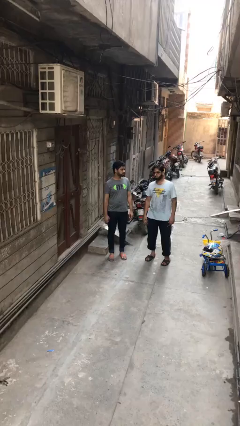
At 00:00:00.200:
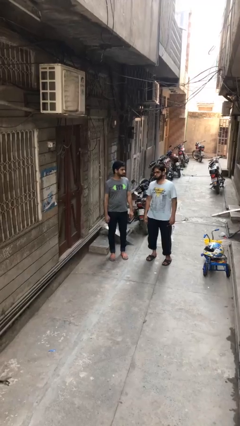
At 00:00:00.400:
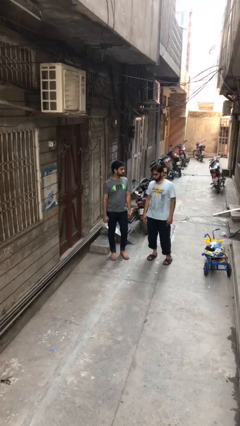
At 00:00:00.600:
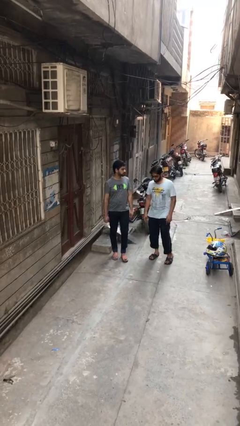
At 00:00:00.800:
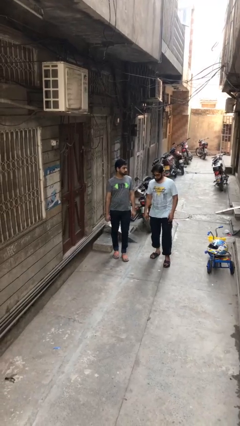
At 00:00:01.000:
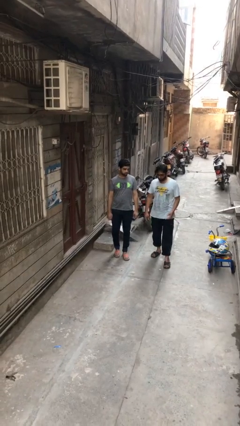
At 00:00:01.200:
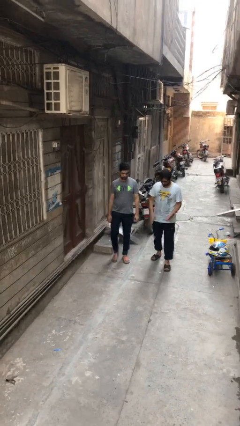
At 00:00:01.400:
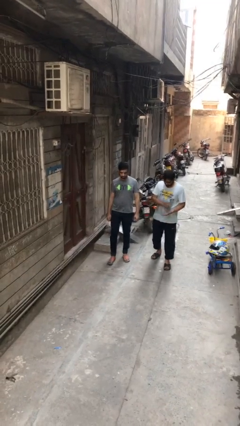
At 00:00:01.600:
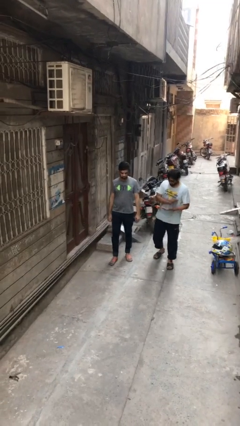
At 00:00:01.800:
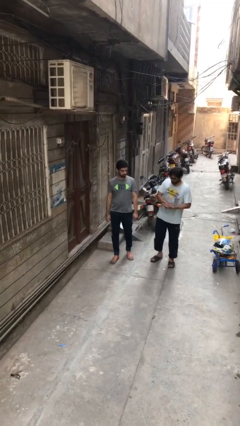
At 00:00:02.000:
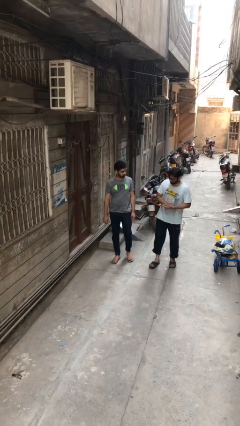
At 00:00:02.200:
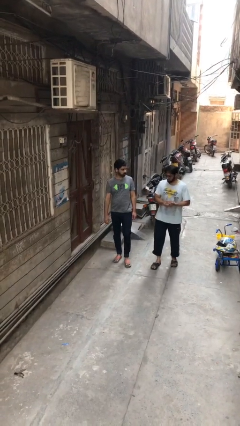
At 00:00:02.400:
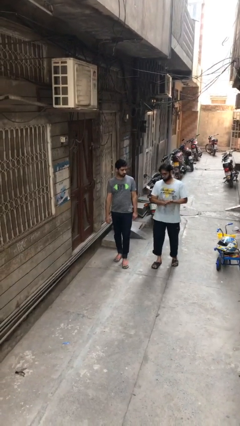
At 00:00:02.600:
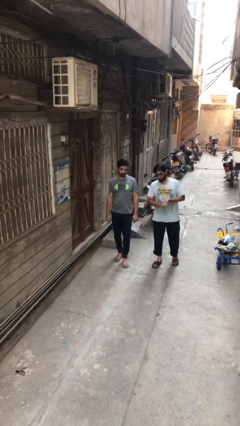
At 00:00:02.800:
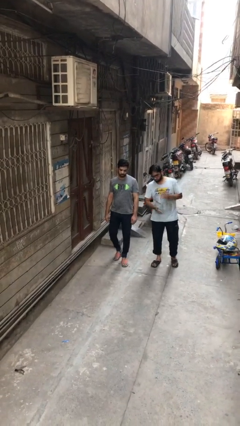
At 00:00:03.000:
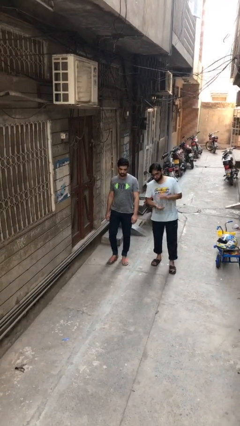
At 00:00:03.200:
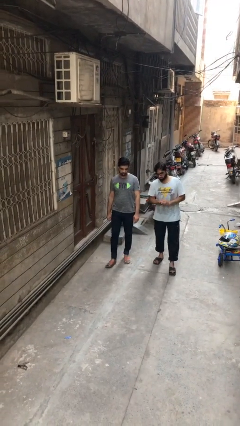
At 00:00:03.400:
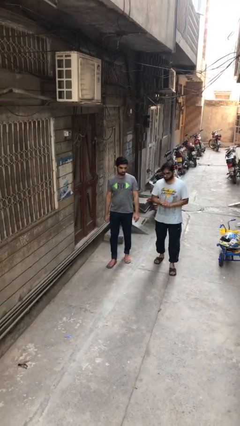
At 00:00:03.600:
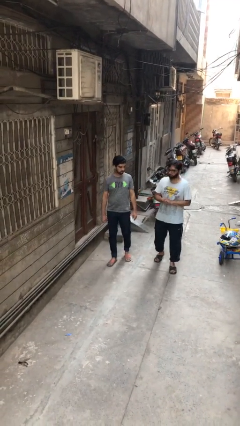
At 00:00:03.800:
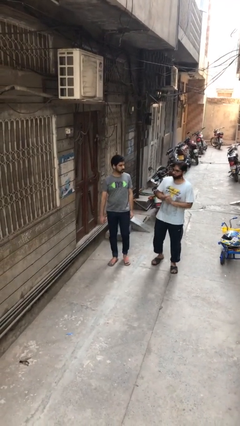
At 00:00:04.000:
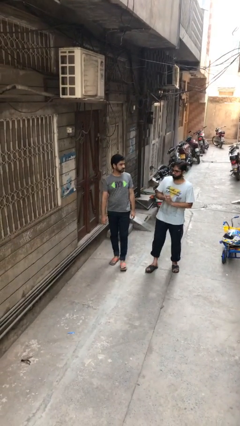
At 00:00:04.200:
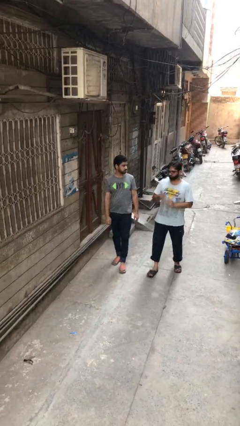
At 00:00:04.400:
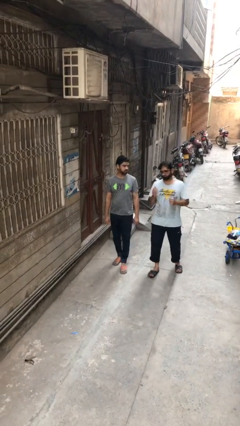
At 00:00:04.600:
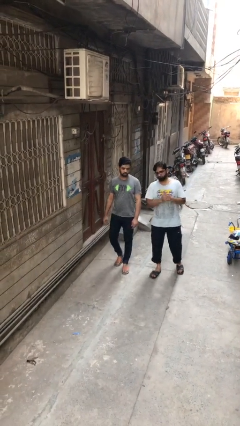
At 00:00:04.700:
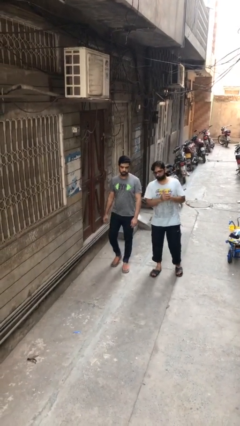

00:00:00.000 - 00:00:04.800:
person talks to person

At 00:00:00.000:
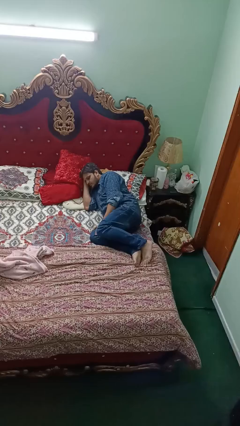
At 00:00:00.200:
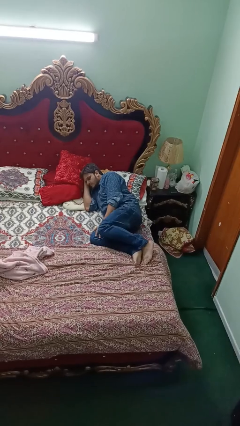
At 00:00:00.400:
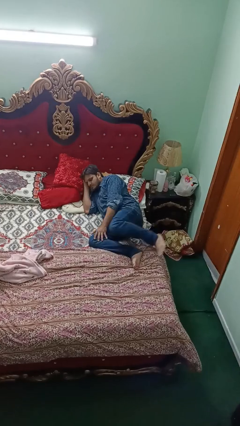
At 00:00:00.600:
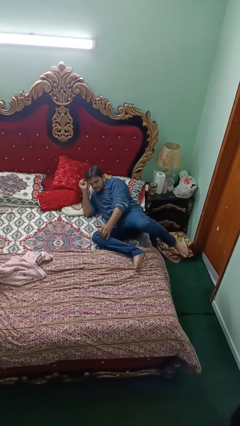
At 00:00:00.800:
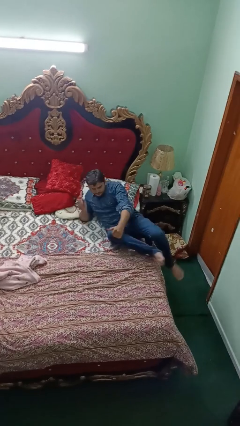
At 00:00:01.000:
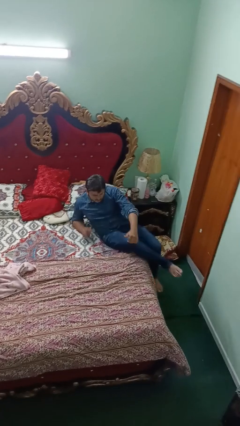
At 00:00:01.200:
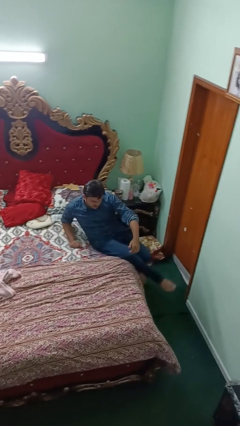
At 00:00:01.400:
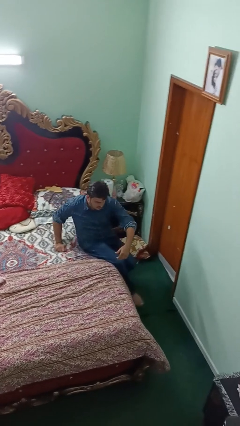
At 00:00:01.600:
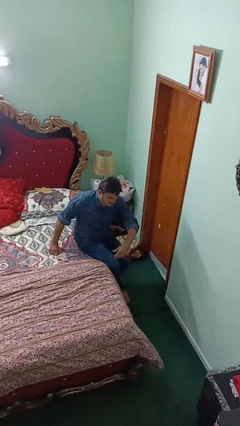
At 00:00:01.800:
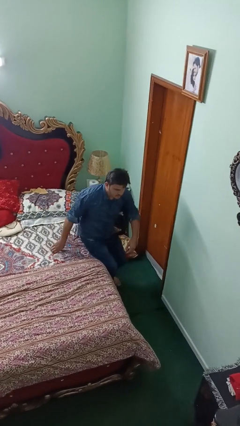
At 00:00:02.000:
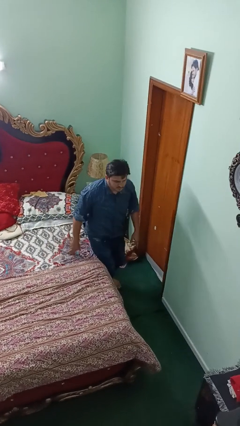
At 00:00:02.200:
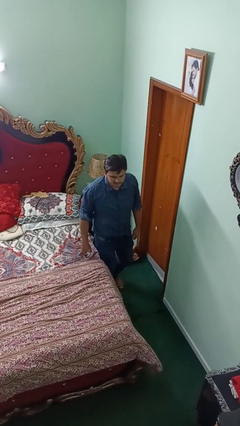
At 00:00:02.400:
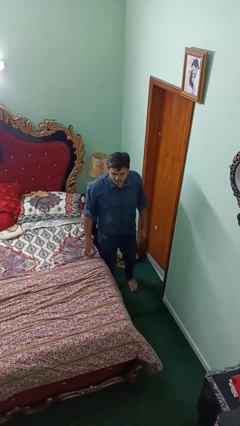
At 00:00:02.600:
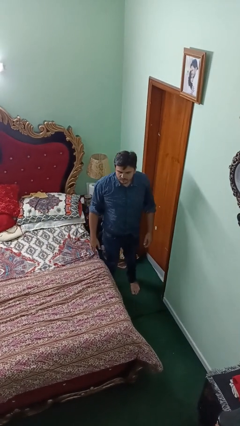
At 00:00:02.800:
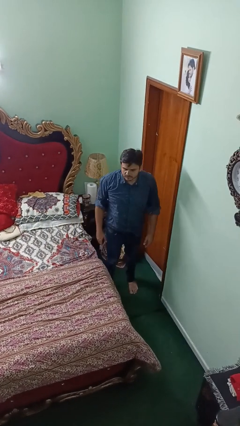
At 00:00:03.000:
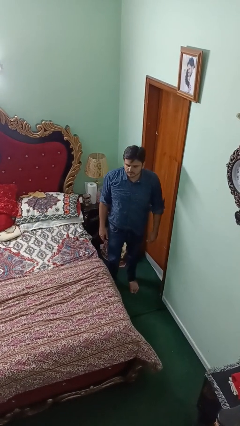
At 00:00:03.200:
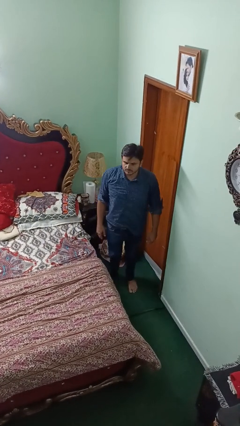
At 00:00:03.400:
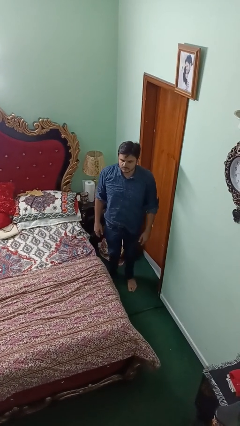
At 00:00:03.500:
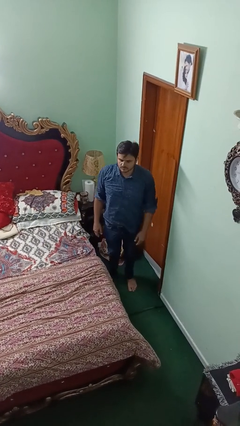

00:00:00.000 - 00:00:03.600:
person stands up

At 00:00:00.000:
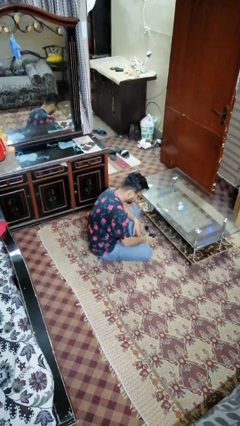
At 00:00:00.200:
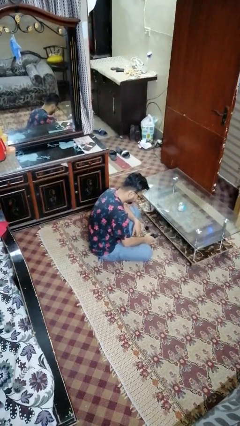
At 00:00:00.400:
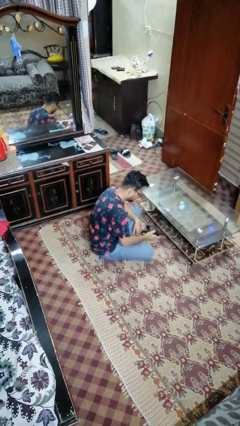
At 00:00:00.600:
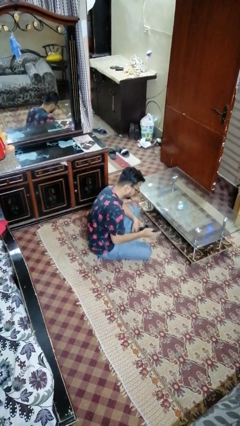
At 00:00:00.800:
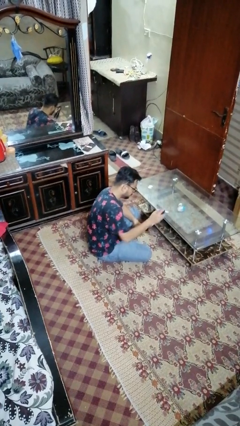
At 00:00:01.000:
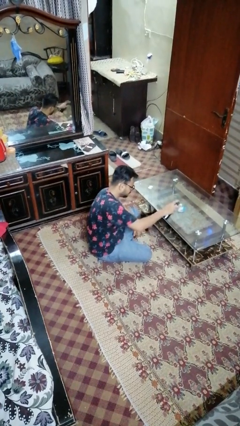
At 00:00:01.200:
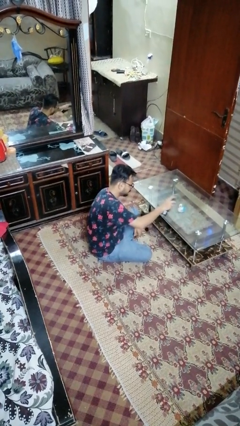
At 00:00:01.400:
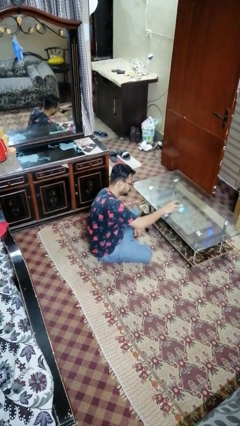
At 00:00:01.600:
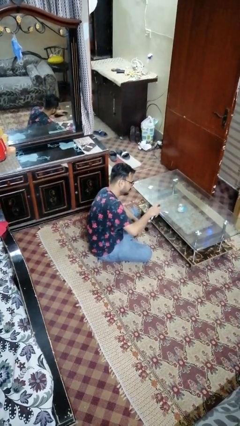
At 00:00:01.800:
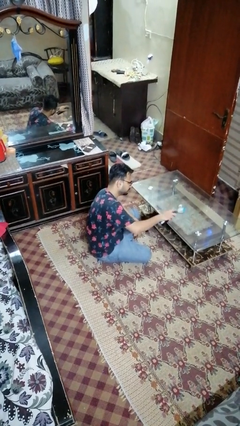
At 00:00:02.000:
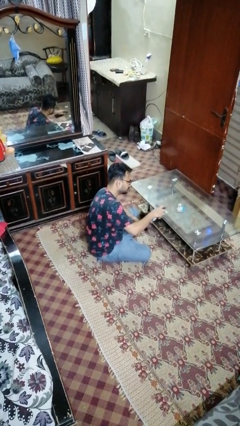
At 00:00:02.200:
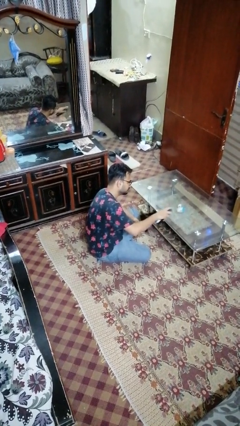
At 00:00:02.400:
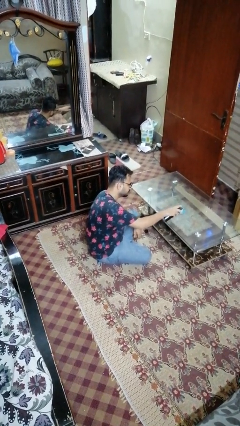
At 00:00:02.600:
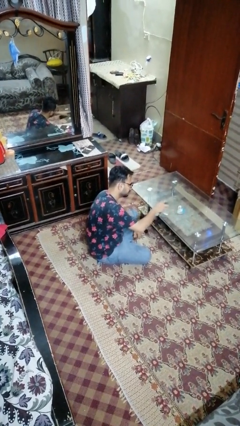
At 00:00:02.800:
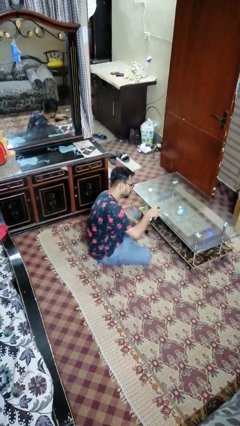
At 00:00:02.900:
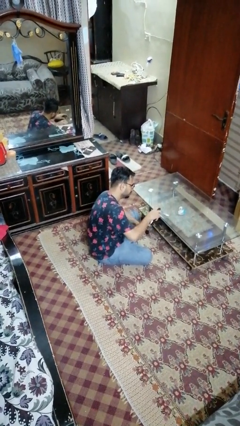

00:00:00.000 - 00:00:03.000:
person sprays from bottle

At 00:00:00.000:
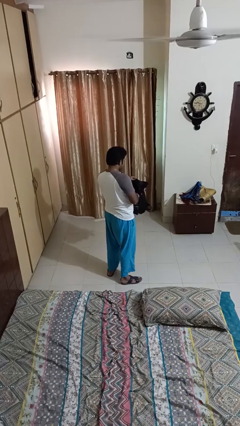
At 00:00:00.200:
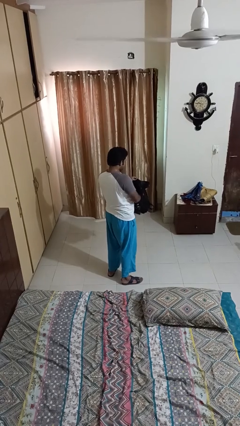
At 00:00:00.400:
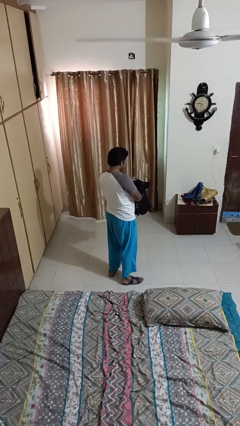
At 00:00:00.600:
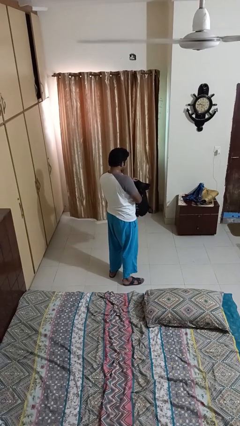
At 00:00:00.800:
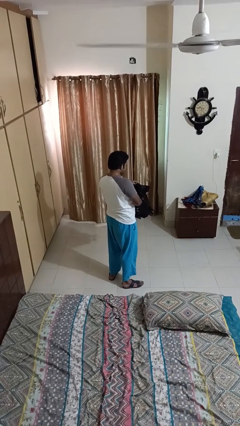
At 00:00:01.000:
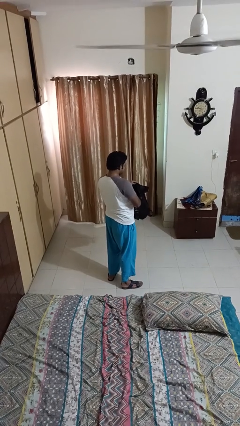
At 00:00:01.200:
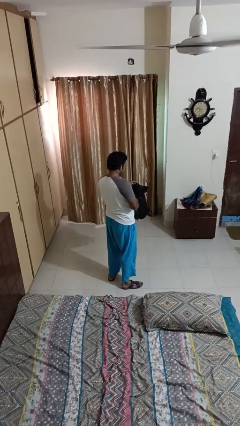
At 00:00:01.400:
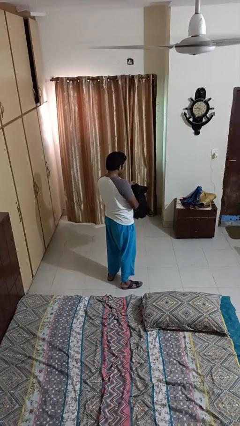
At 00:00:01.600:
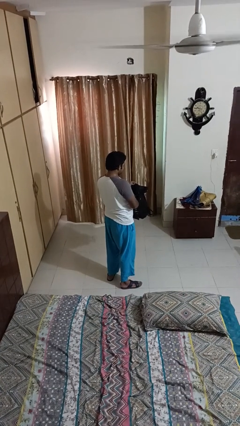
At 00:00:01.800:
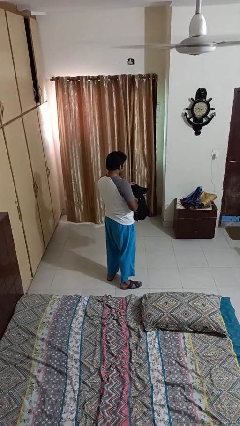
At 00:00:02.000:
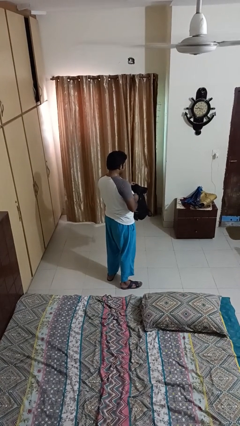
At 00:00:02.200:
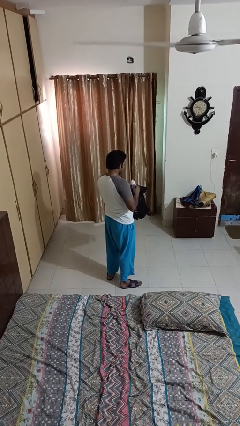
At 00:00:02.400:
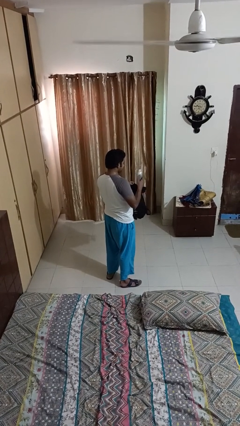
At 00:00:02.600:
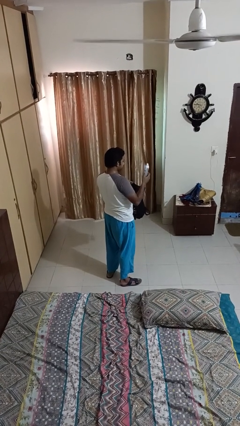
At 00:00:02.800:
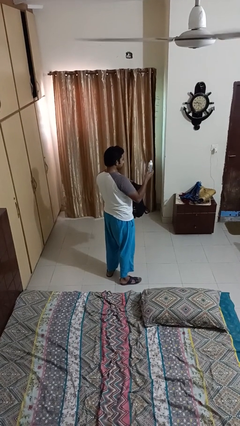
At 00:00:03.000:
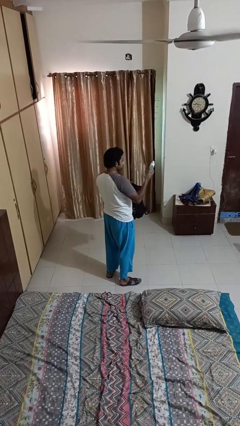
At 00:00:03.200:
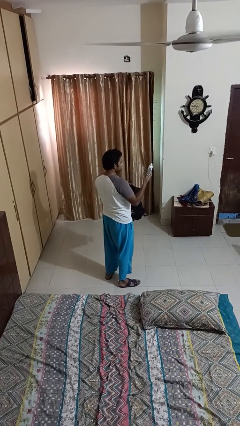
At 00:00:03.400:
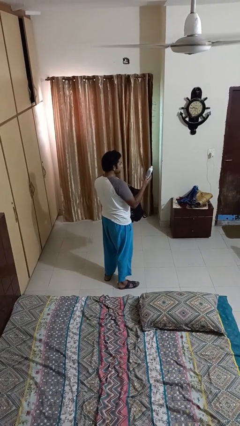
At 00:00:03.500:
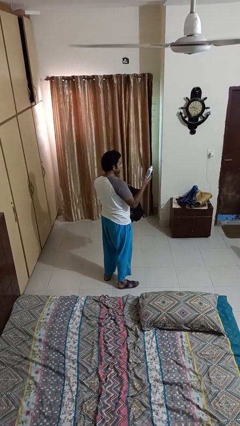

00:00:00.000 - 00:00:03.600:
person lies down on couch

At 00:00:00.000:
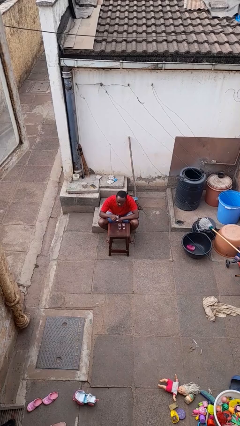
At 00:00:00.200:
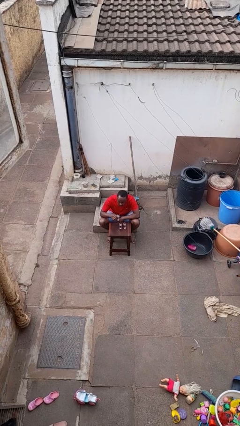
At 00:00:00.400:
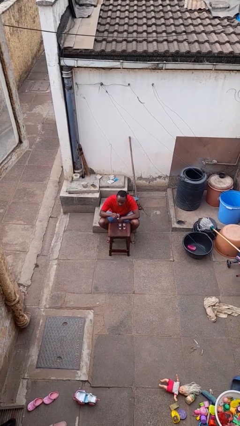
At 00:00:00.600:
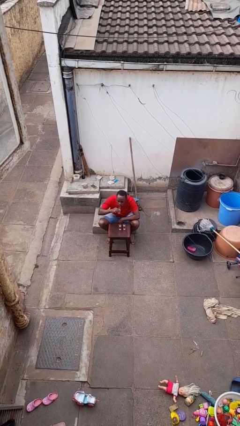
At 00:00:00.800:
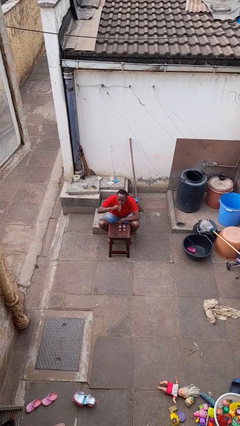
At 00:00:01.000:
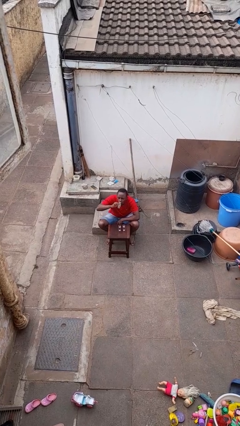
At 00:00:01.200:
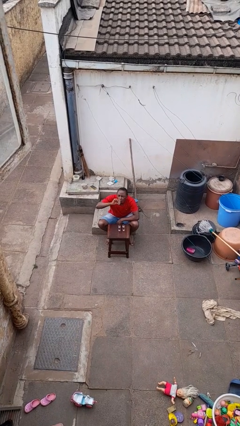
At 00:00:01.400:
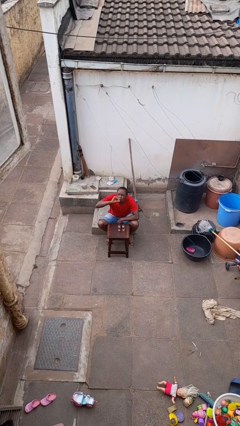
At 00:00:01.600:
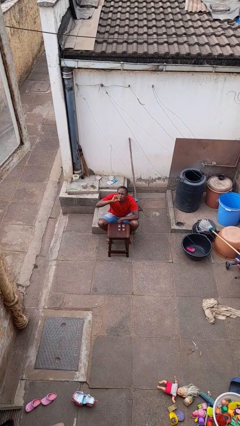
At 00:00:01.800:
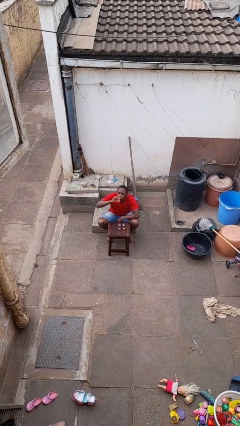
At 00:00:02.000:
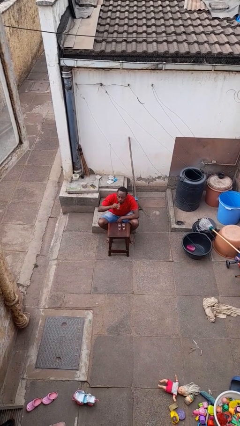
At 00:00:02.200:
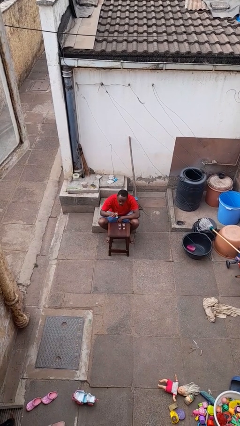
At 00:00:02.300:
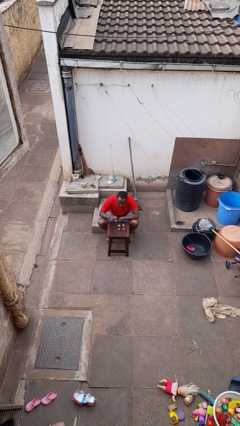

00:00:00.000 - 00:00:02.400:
person drinks from shotglass
